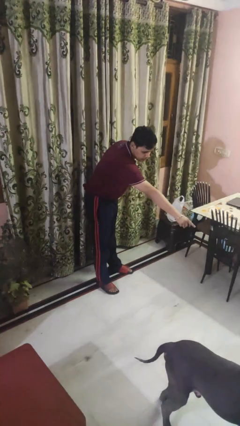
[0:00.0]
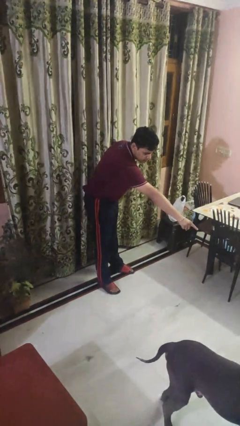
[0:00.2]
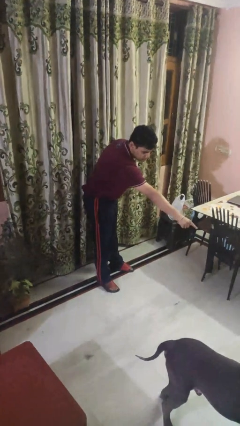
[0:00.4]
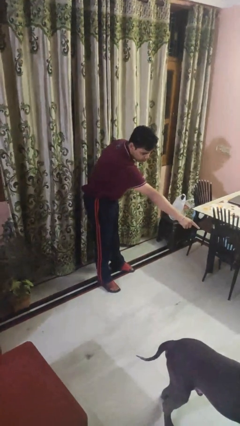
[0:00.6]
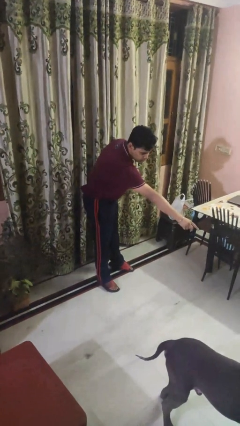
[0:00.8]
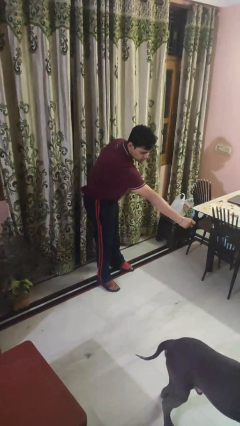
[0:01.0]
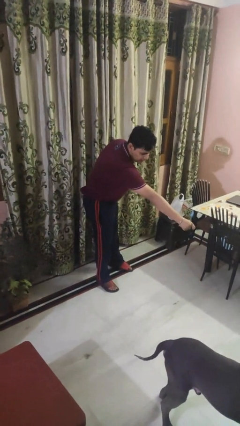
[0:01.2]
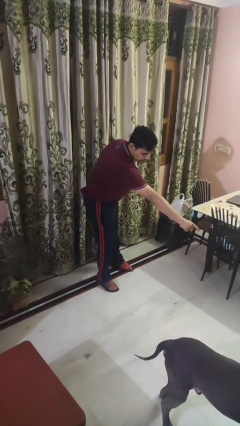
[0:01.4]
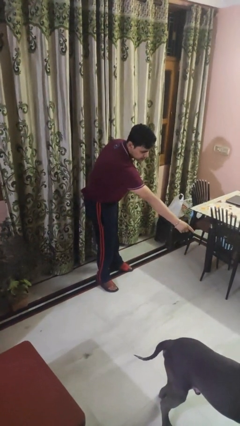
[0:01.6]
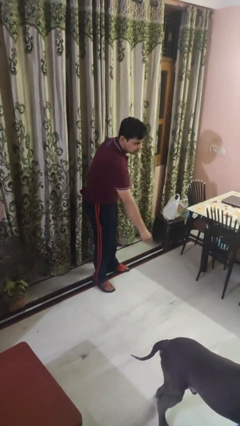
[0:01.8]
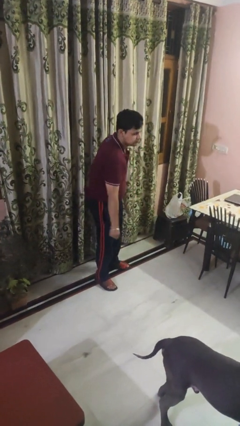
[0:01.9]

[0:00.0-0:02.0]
person points to dog

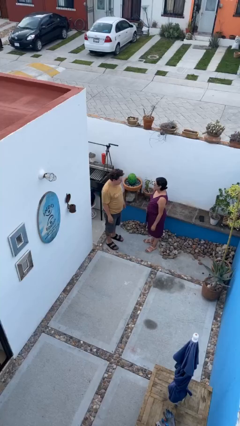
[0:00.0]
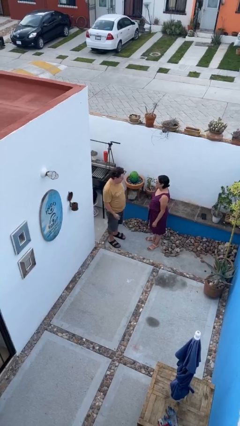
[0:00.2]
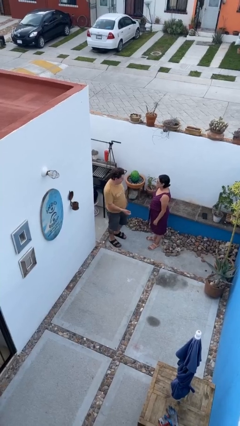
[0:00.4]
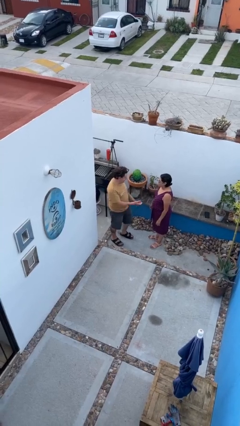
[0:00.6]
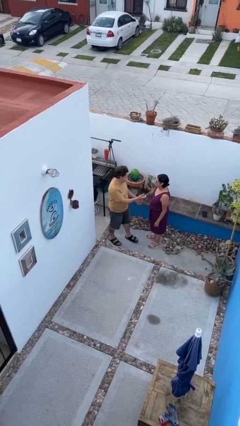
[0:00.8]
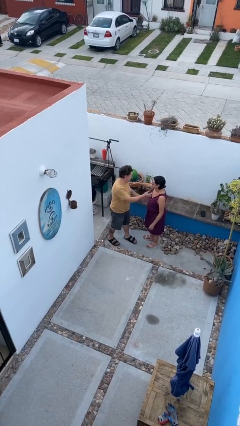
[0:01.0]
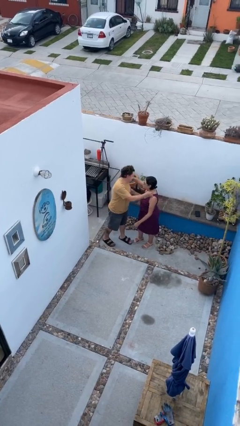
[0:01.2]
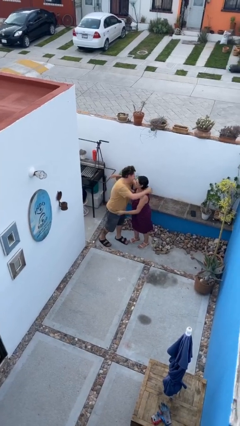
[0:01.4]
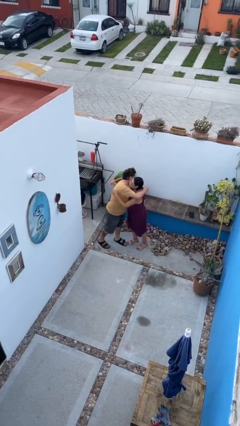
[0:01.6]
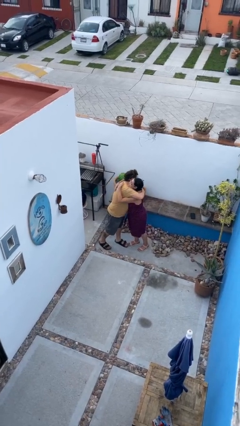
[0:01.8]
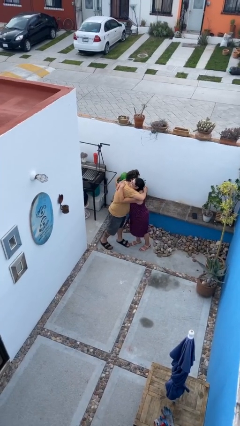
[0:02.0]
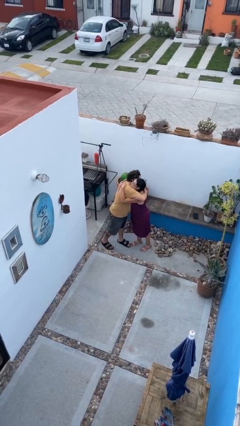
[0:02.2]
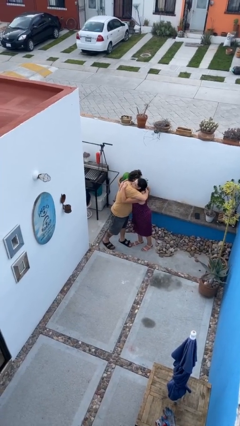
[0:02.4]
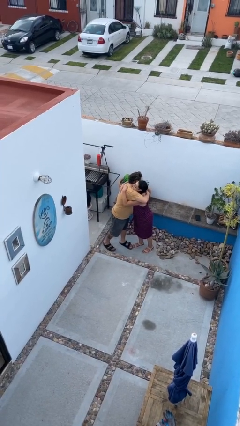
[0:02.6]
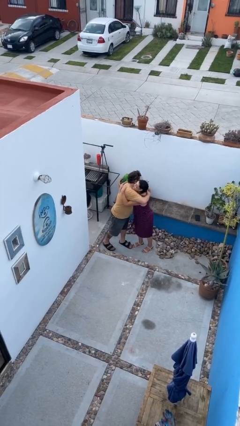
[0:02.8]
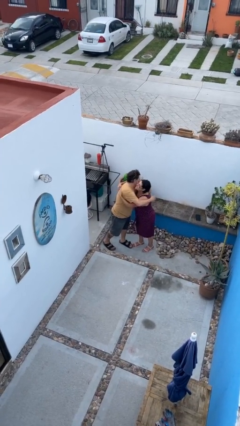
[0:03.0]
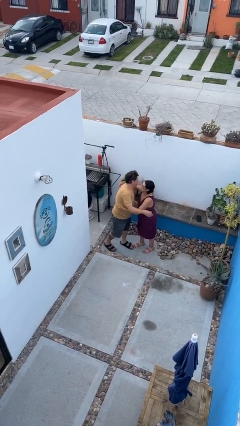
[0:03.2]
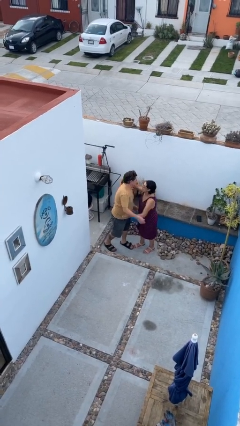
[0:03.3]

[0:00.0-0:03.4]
person embraces person

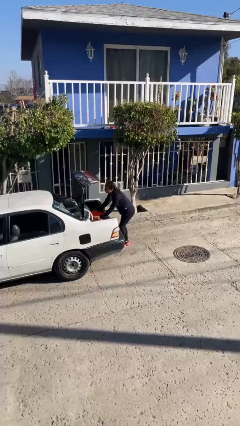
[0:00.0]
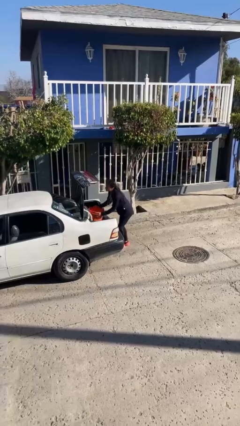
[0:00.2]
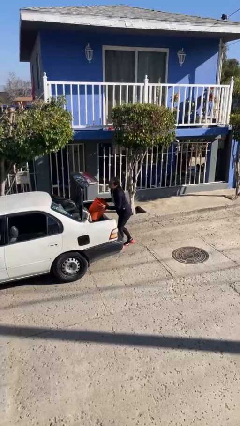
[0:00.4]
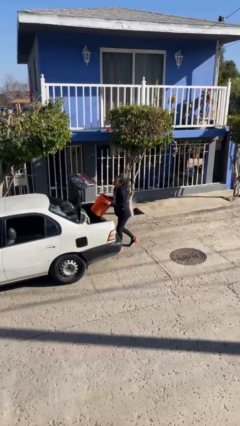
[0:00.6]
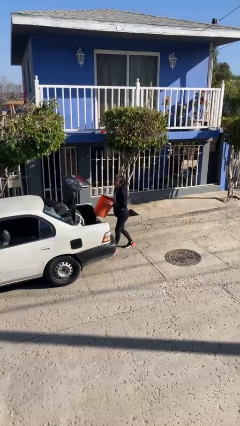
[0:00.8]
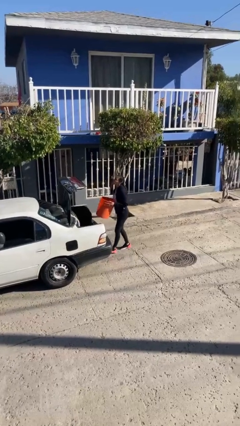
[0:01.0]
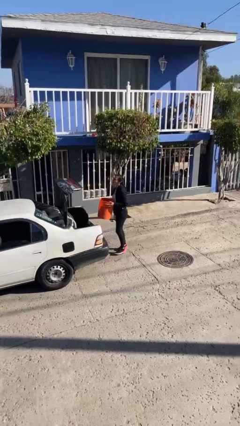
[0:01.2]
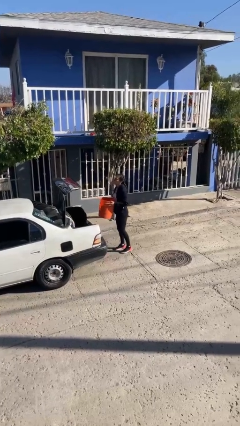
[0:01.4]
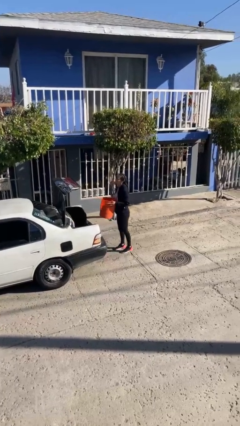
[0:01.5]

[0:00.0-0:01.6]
person unloads car

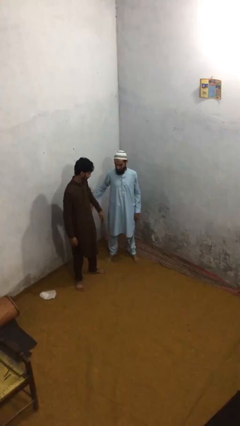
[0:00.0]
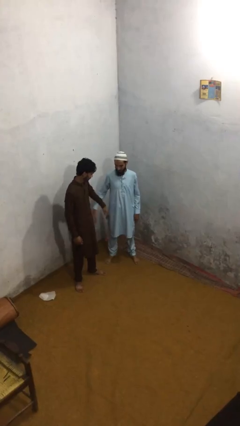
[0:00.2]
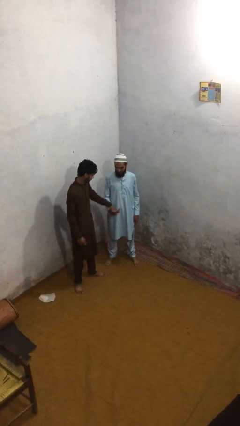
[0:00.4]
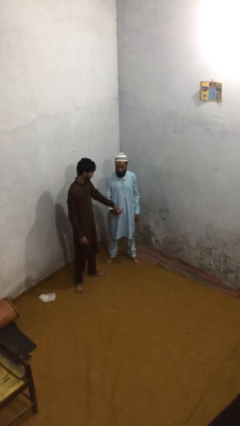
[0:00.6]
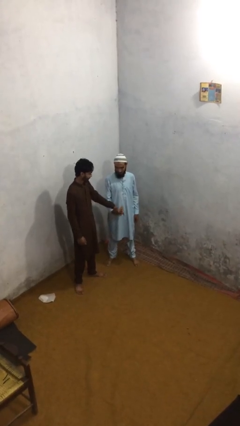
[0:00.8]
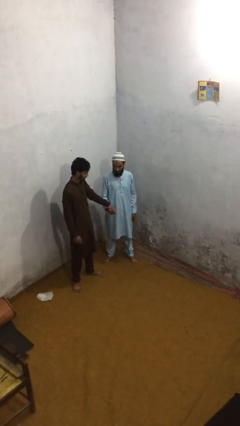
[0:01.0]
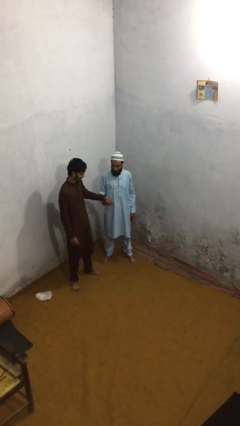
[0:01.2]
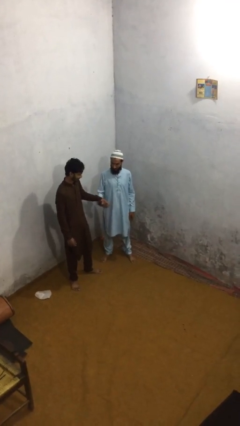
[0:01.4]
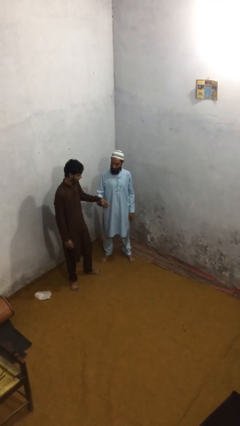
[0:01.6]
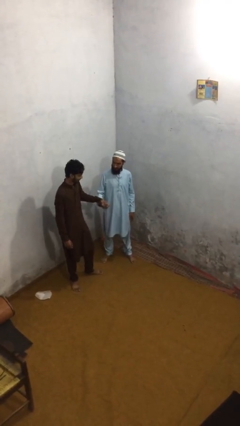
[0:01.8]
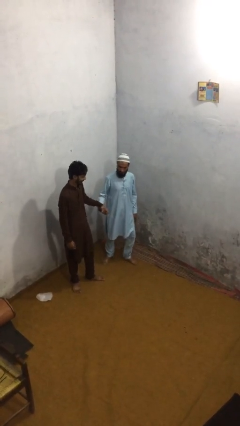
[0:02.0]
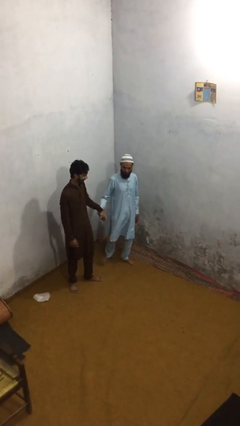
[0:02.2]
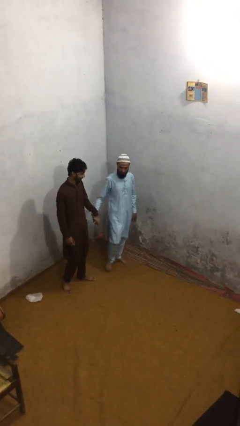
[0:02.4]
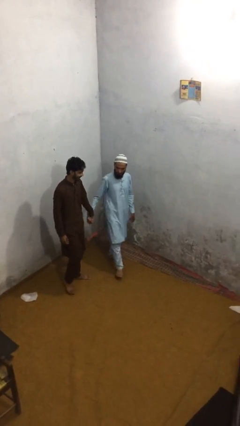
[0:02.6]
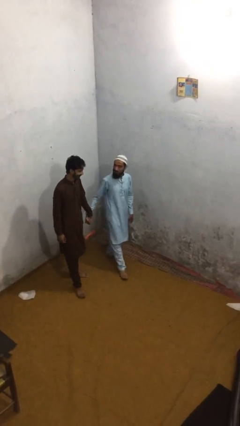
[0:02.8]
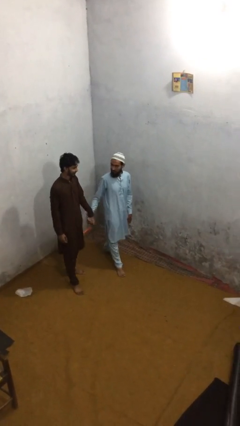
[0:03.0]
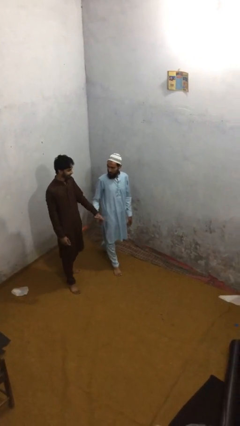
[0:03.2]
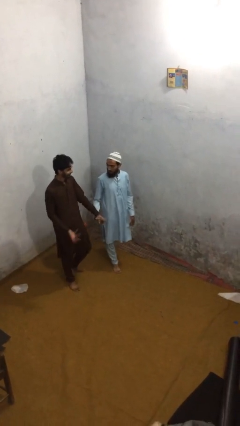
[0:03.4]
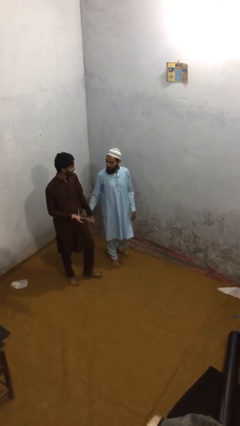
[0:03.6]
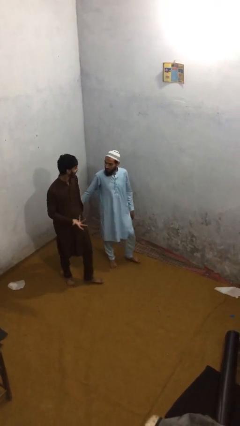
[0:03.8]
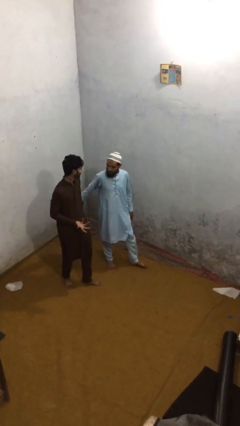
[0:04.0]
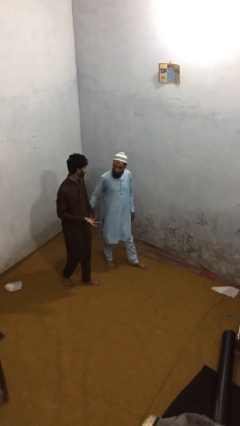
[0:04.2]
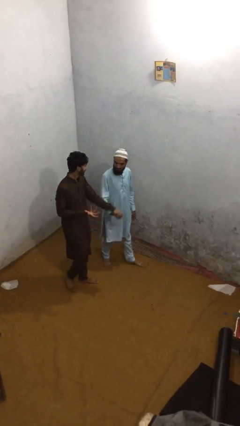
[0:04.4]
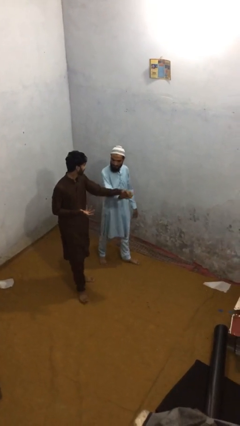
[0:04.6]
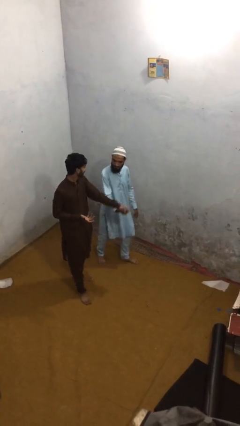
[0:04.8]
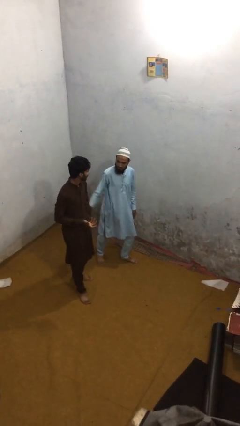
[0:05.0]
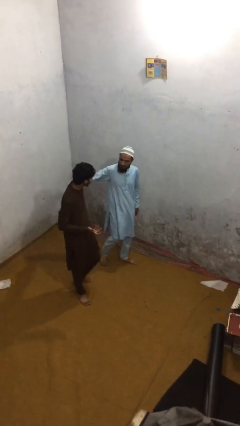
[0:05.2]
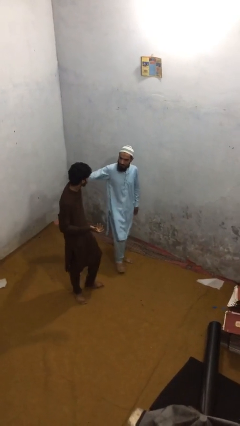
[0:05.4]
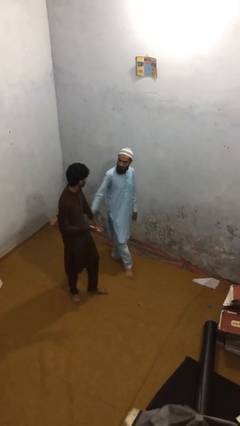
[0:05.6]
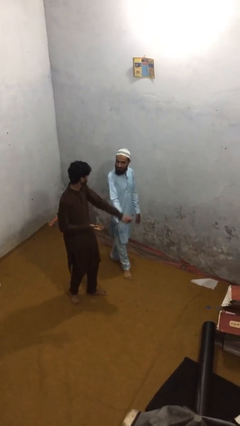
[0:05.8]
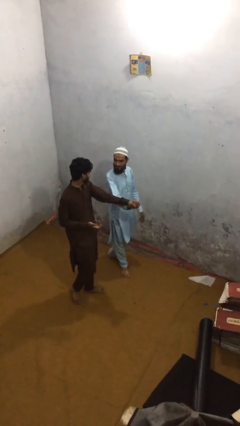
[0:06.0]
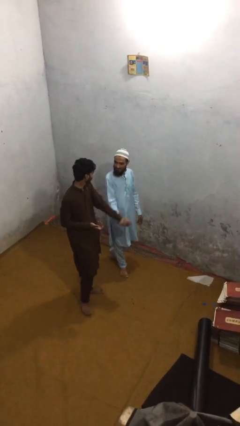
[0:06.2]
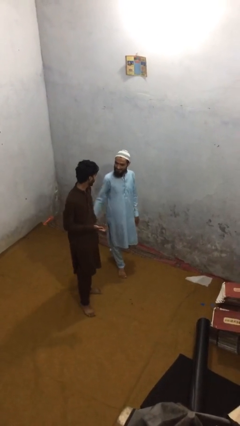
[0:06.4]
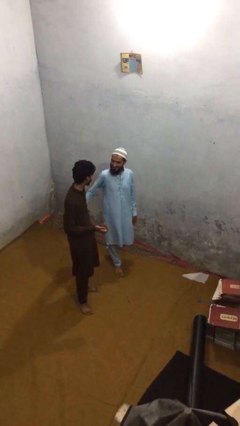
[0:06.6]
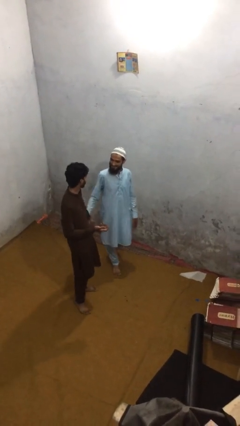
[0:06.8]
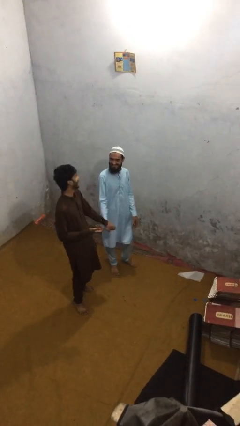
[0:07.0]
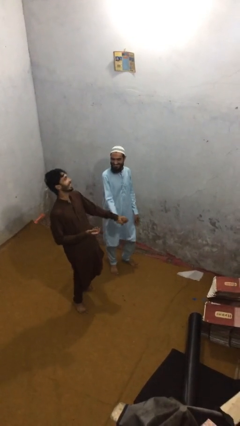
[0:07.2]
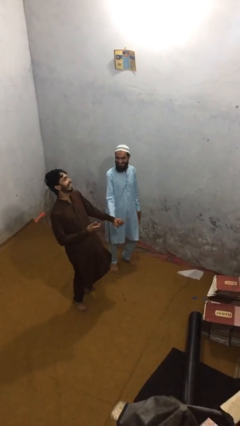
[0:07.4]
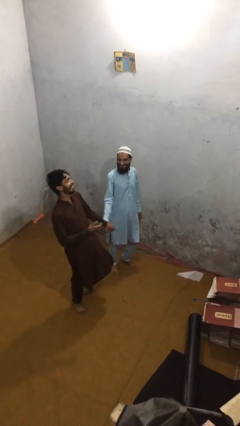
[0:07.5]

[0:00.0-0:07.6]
person holds hand

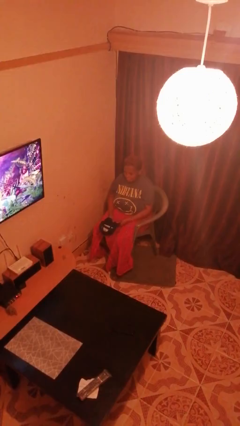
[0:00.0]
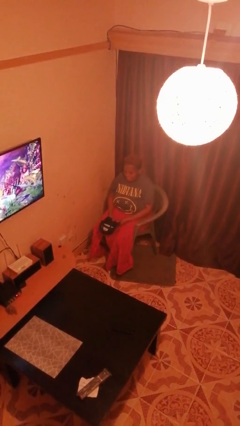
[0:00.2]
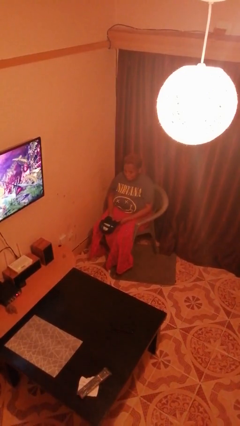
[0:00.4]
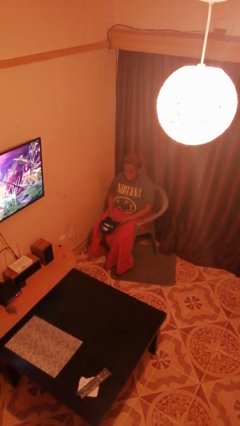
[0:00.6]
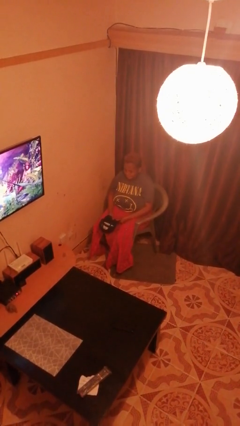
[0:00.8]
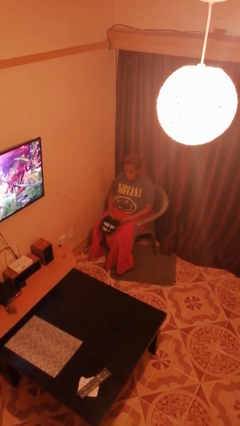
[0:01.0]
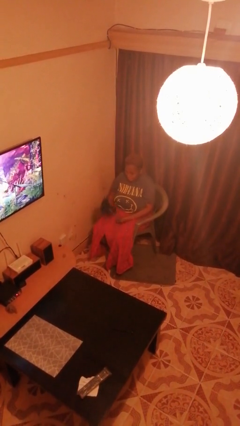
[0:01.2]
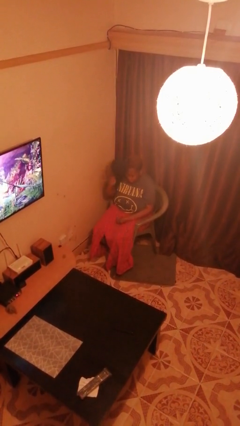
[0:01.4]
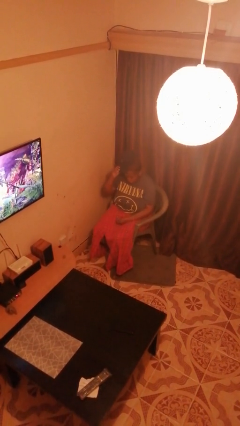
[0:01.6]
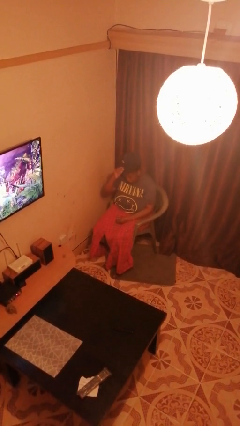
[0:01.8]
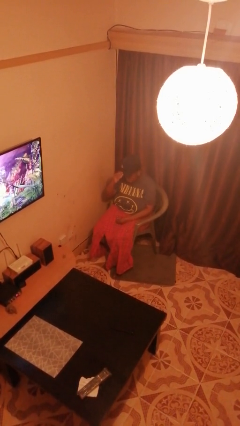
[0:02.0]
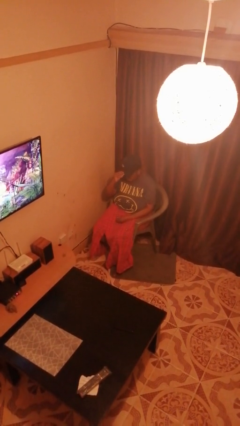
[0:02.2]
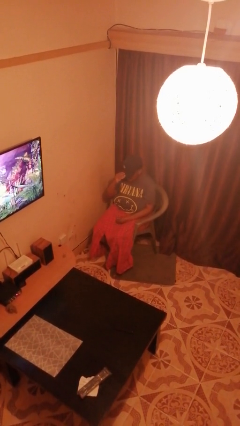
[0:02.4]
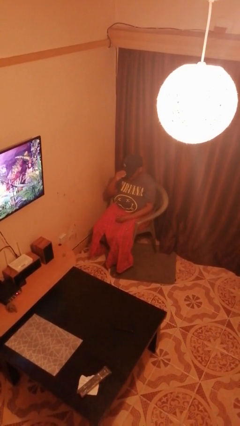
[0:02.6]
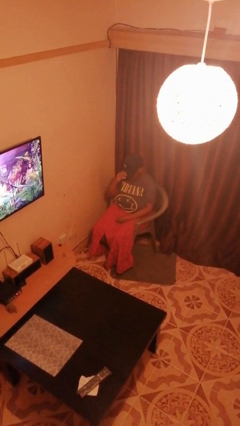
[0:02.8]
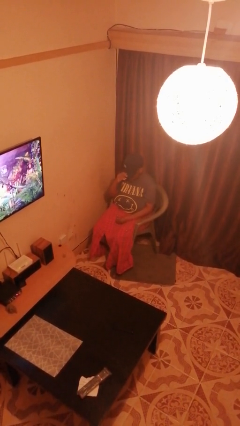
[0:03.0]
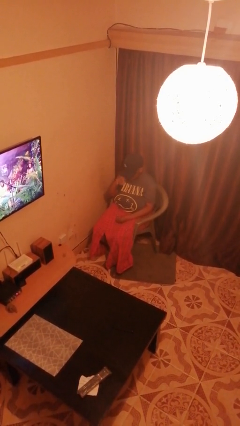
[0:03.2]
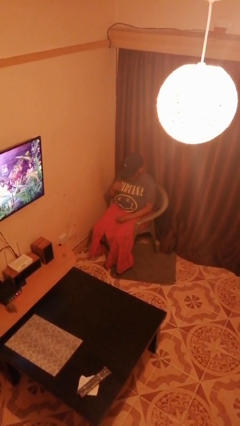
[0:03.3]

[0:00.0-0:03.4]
person puts on hat
